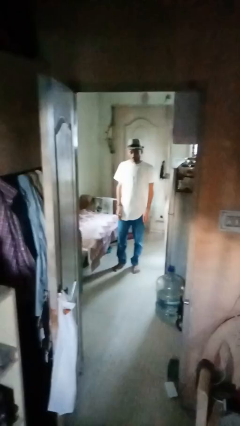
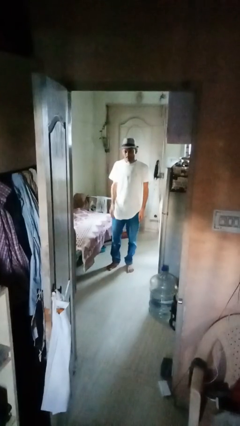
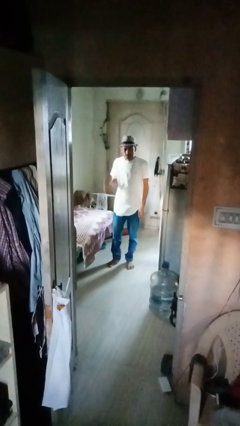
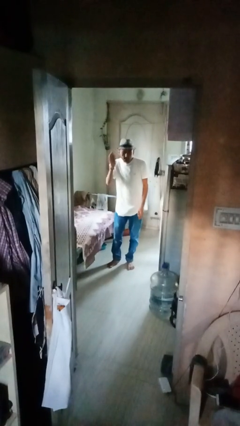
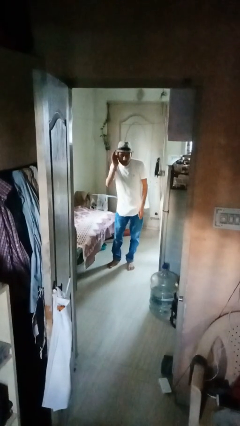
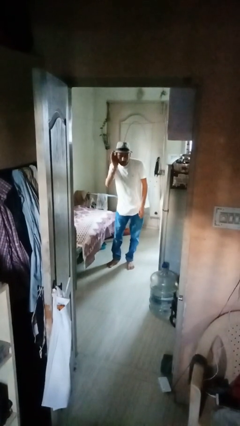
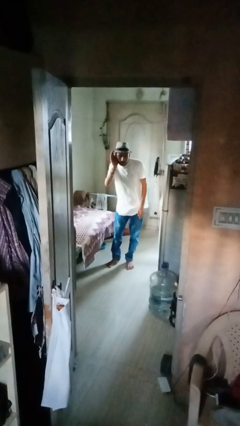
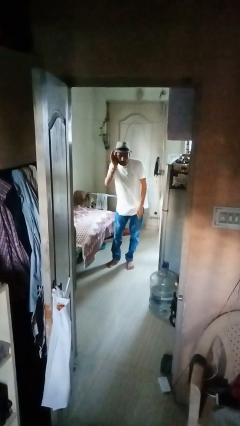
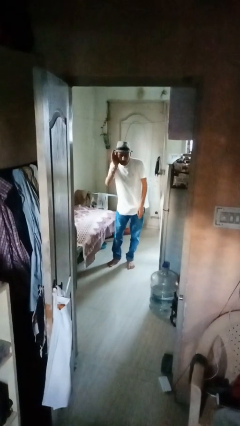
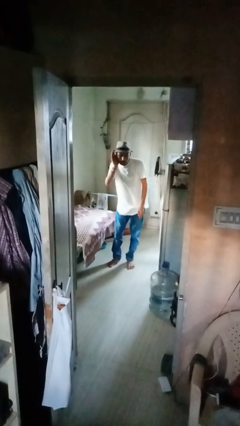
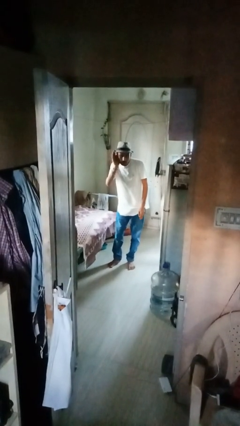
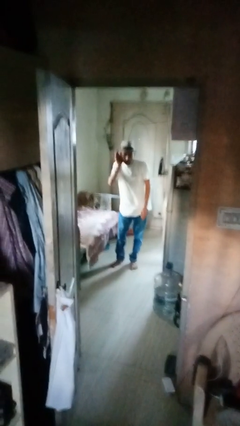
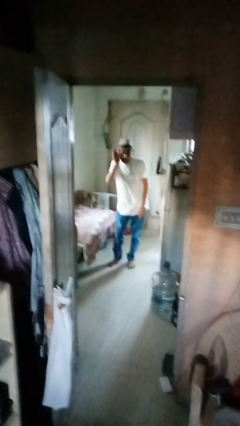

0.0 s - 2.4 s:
person gestures listen closely

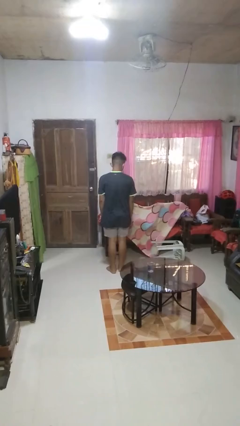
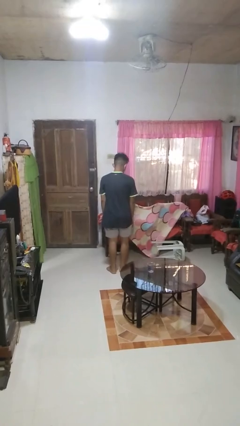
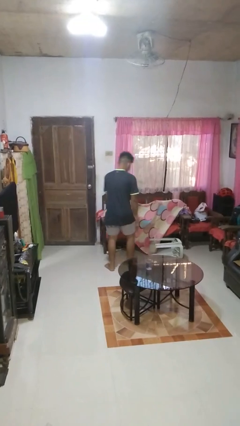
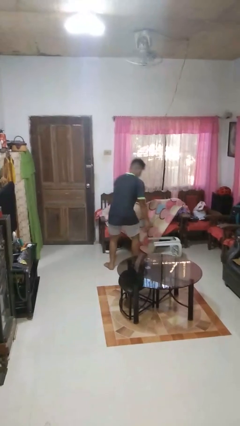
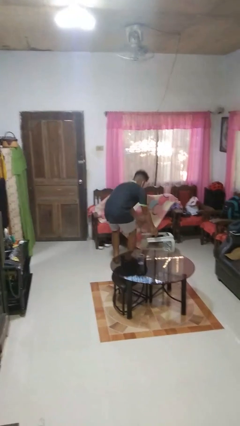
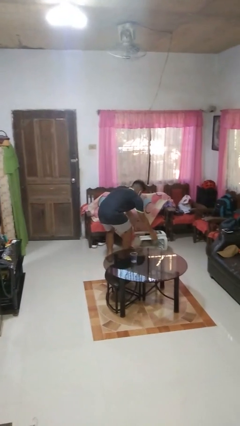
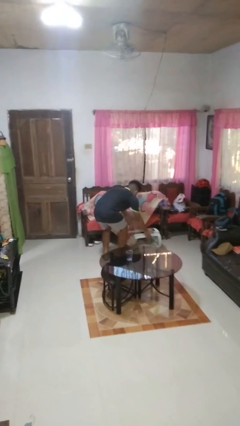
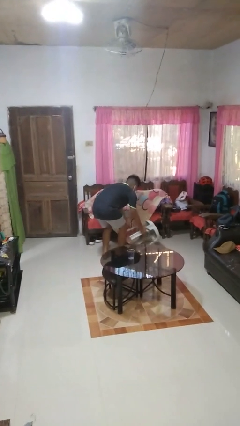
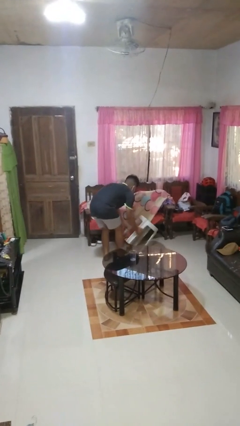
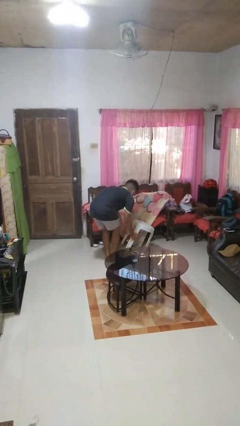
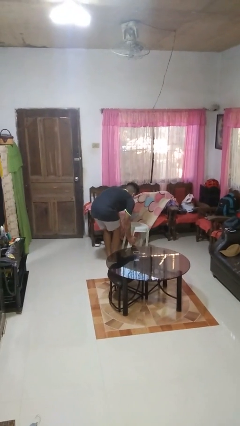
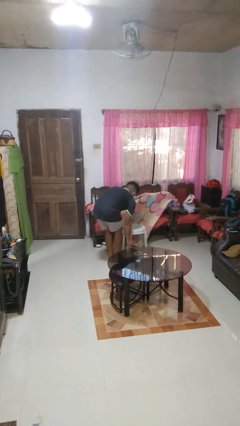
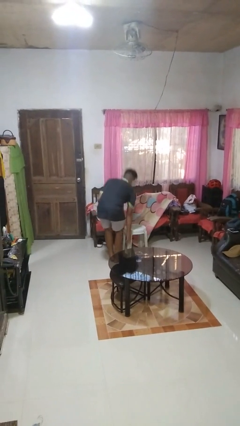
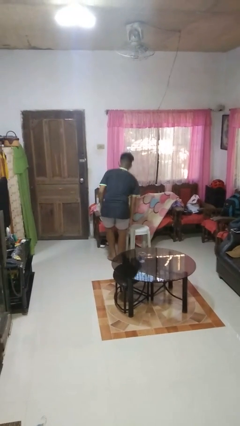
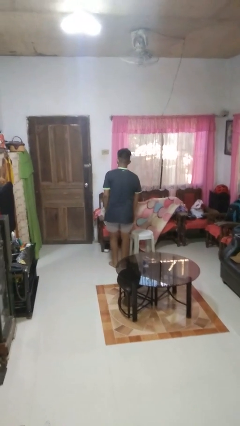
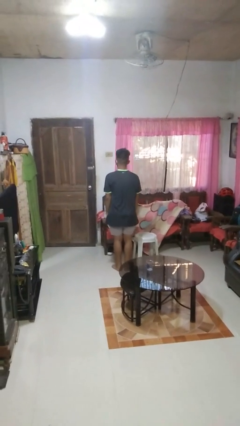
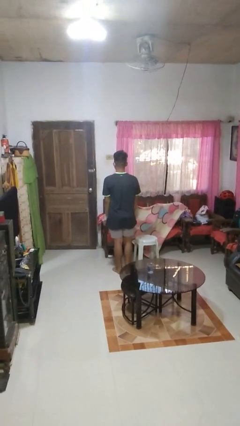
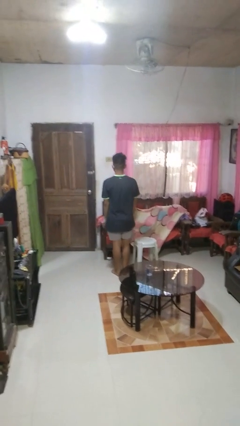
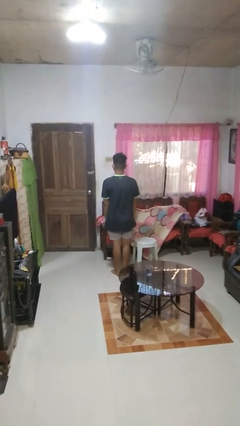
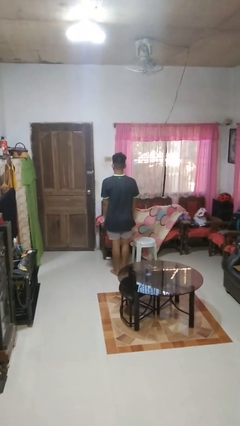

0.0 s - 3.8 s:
person sets upright furniture

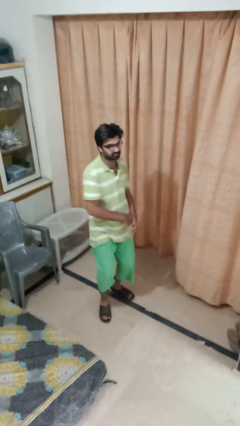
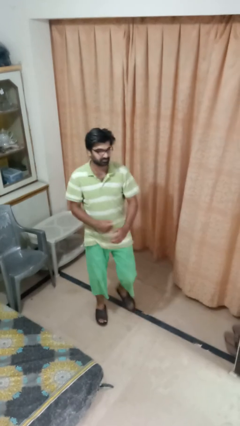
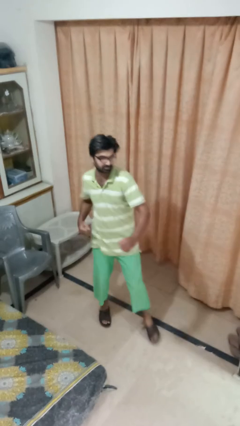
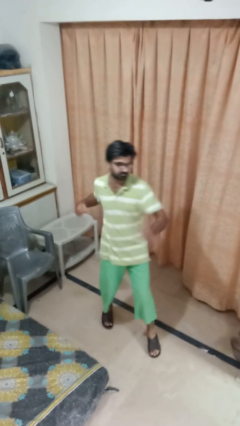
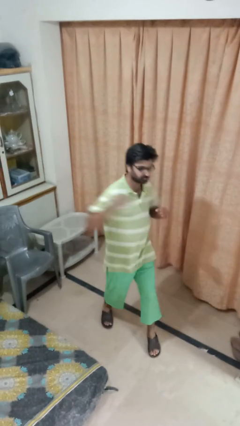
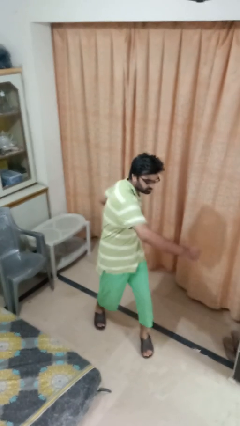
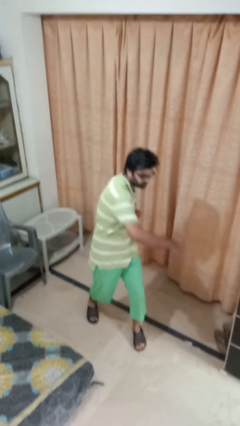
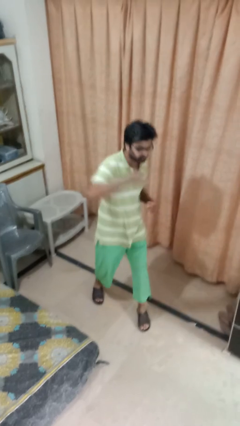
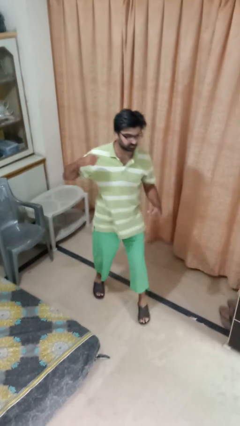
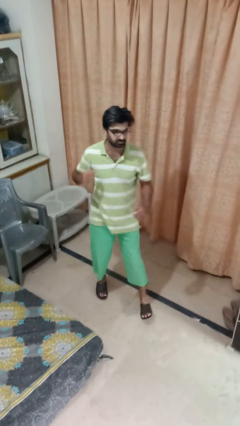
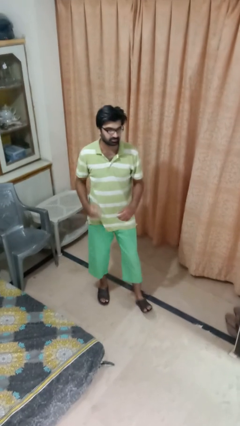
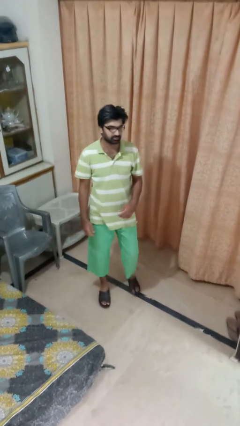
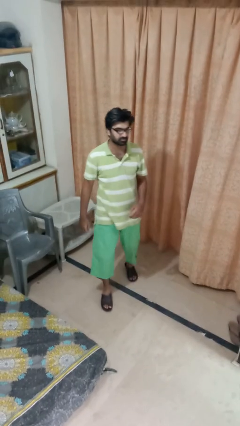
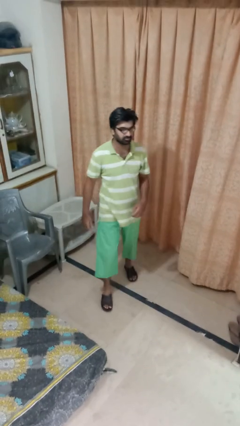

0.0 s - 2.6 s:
person karate chop

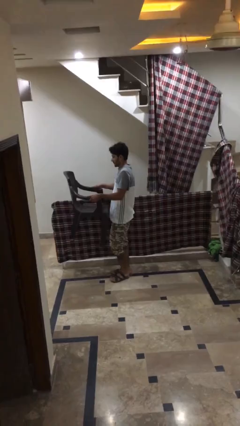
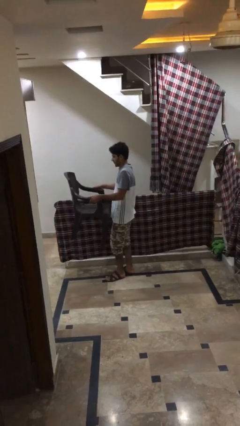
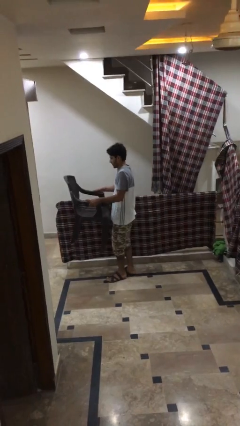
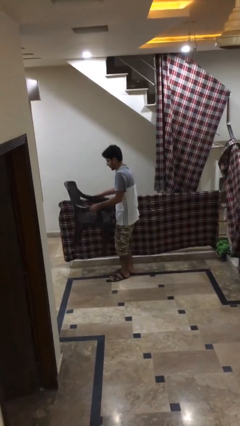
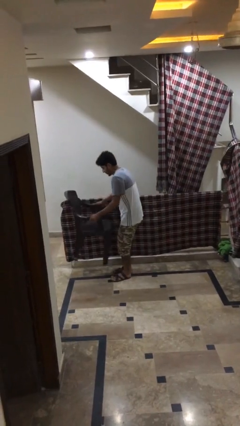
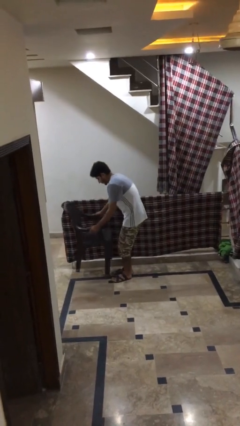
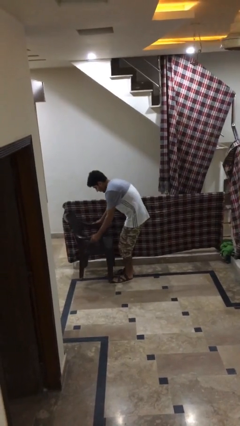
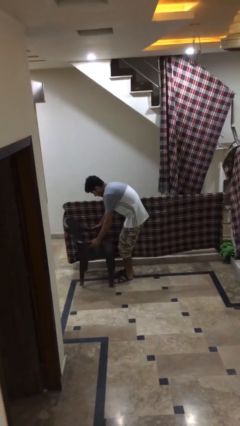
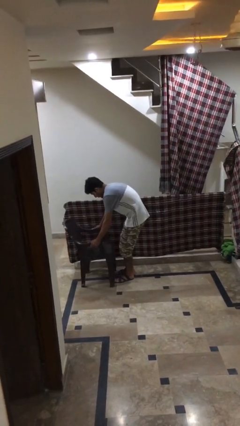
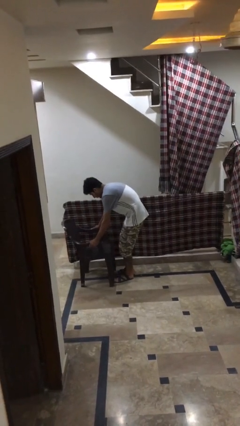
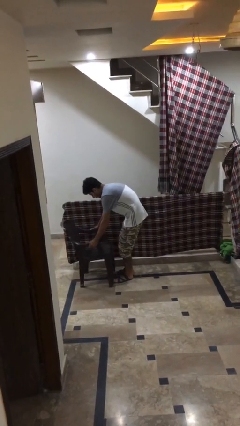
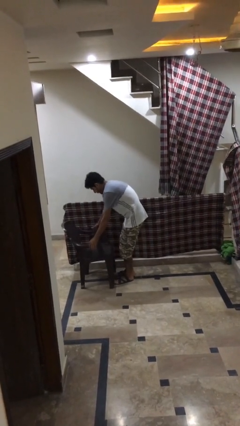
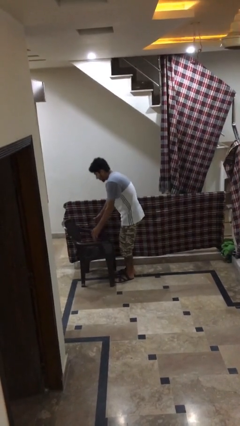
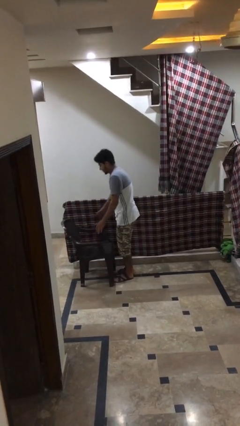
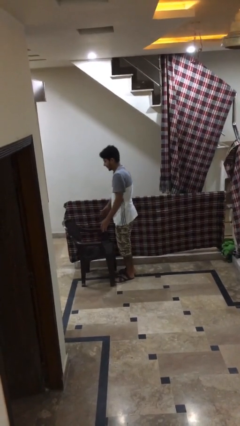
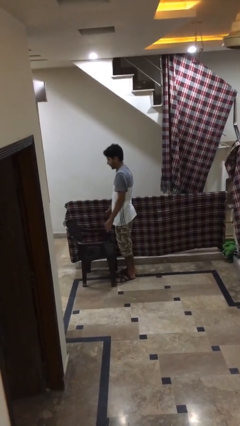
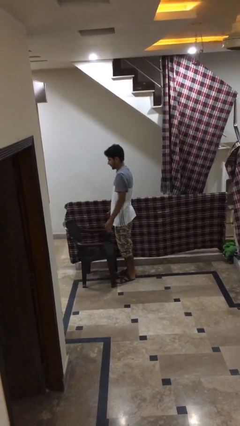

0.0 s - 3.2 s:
person puts down object on floor

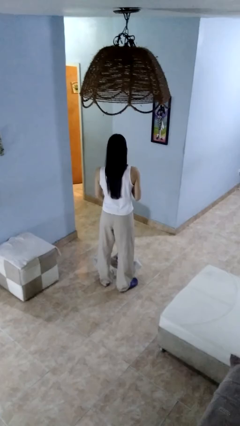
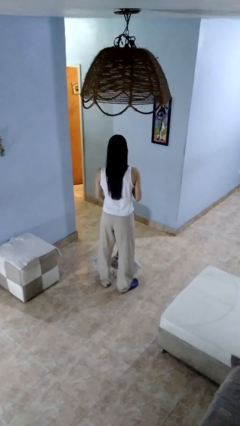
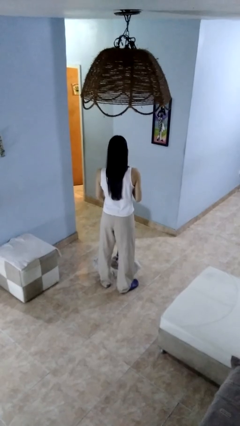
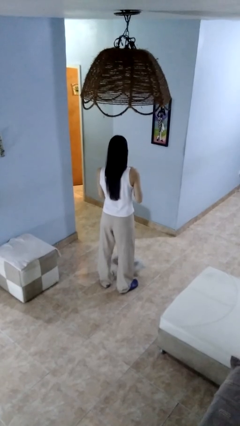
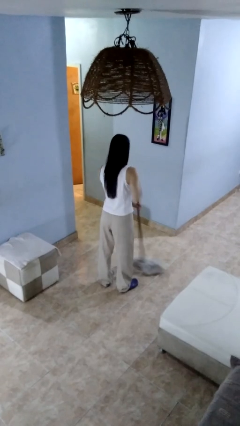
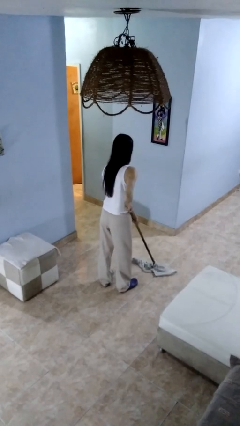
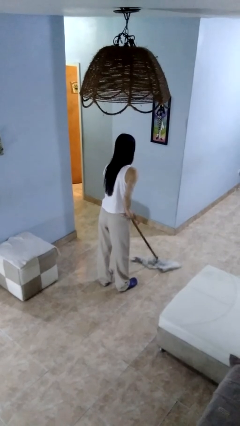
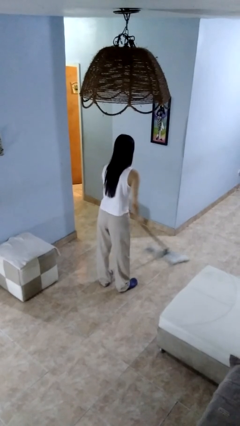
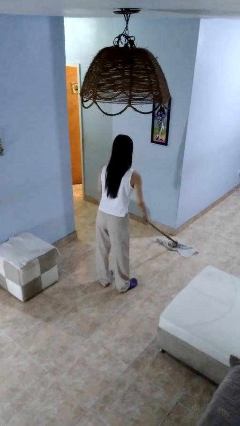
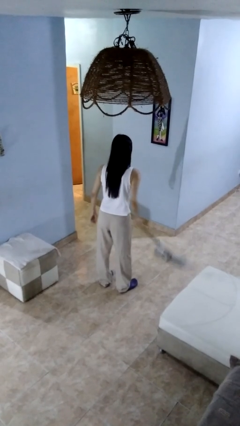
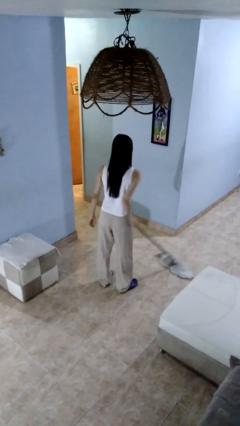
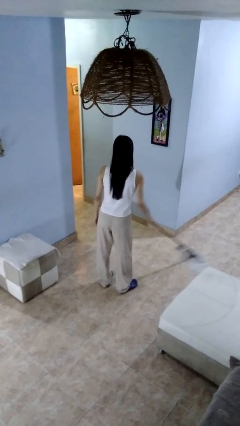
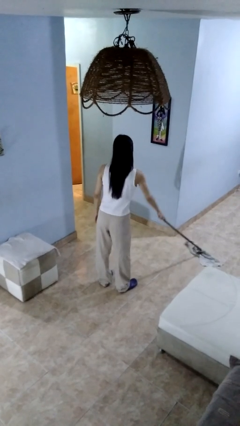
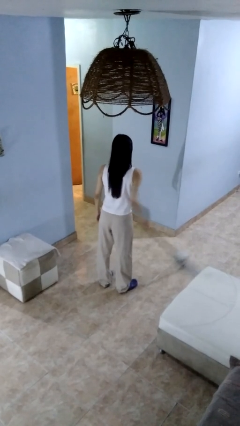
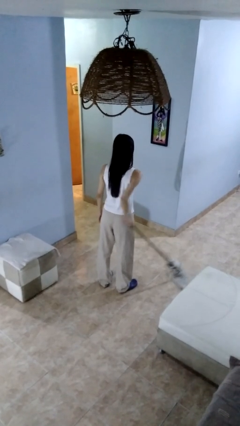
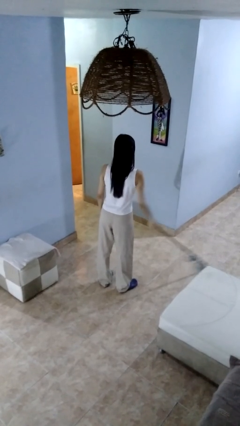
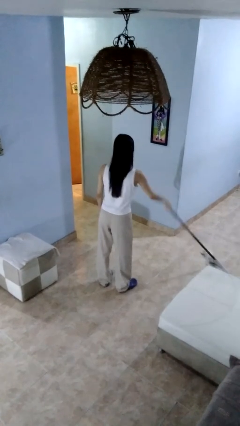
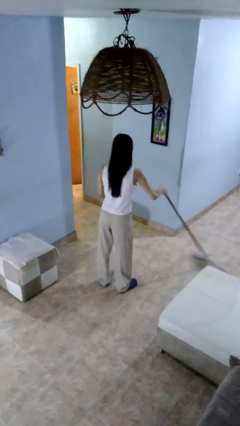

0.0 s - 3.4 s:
person mops

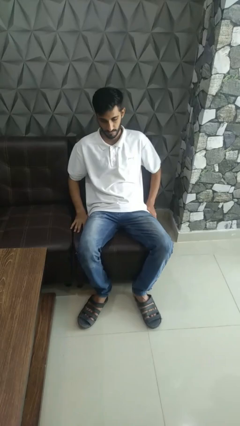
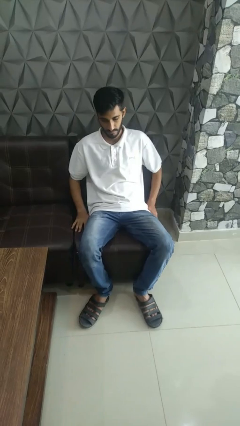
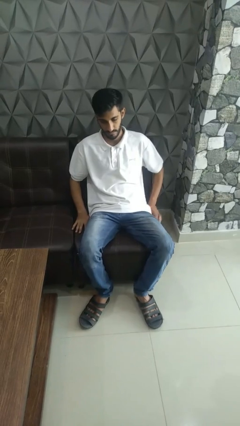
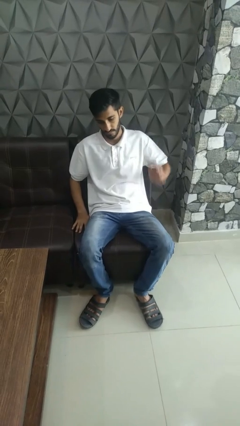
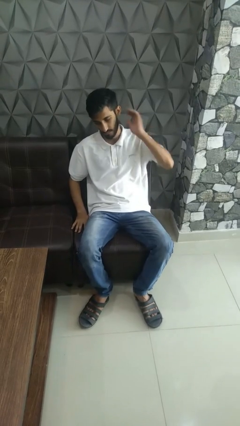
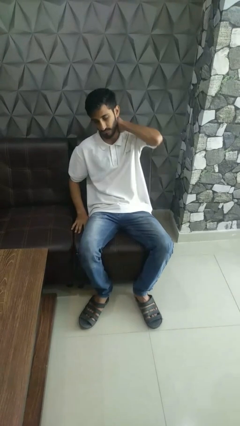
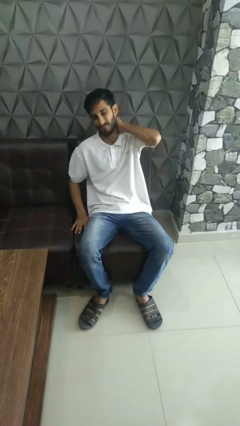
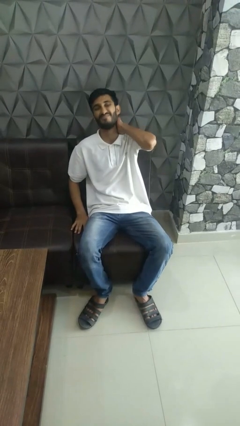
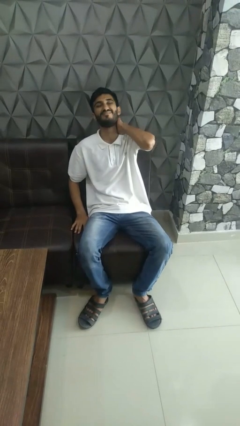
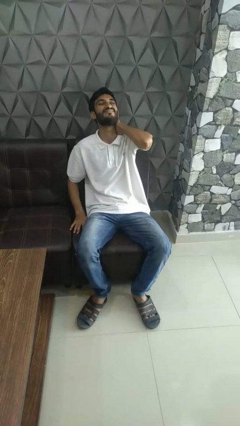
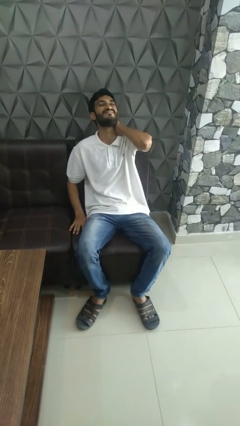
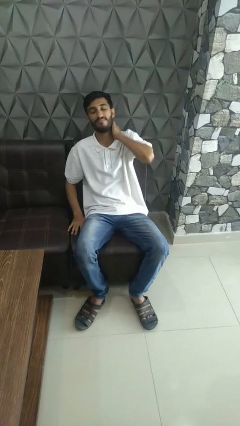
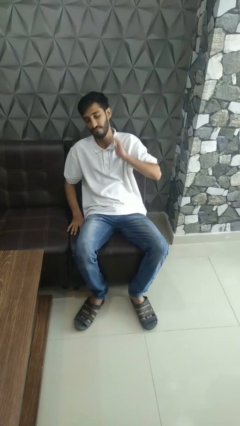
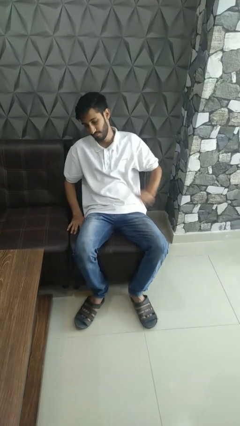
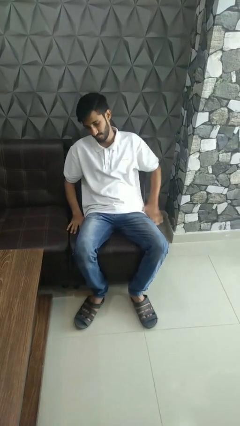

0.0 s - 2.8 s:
person rubs neck
